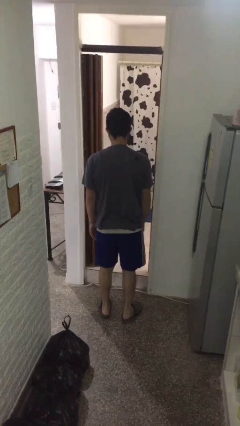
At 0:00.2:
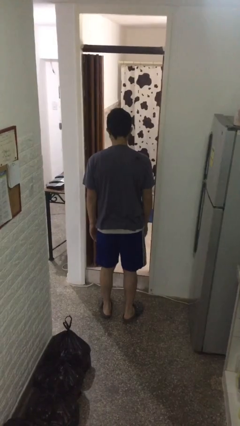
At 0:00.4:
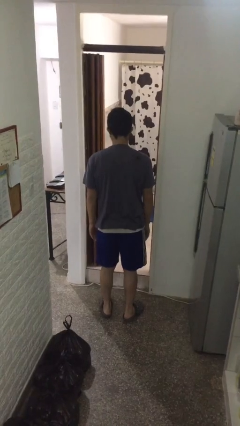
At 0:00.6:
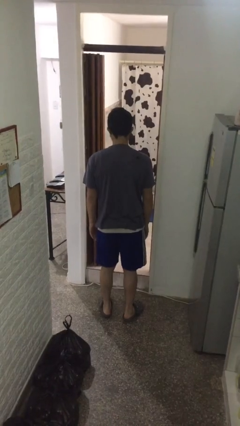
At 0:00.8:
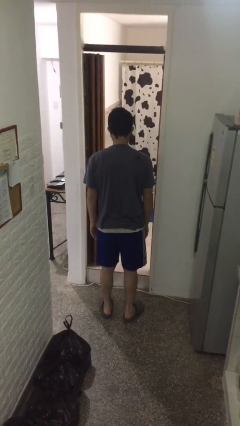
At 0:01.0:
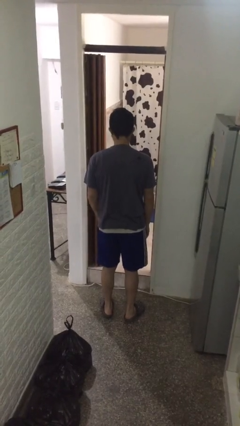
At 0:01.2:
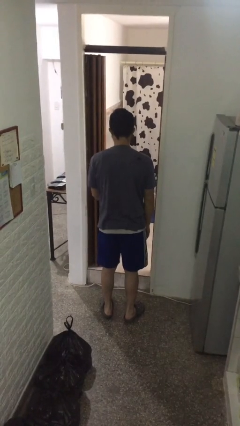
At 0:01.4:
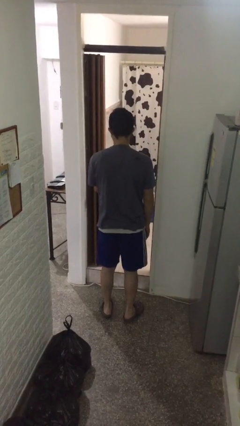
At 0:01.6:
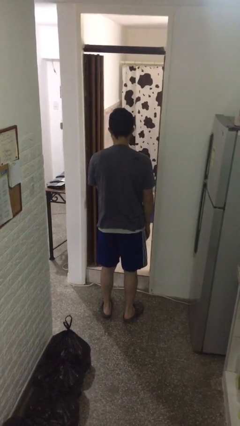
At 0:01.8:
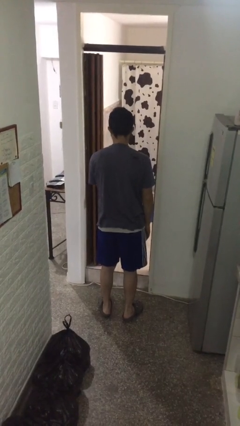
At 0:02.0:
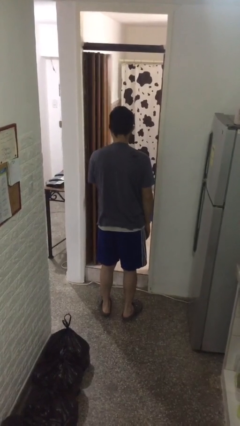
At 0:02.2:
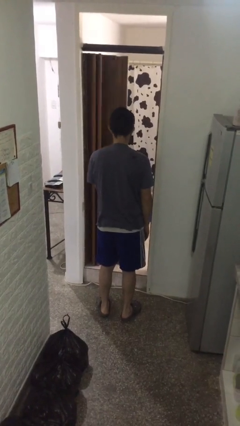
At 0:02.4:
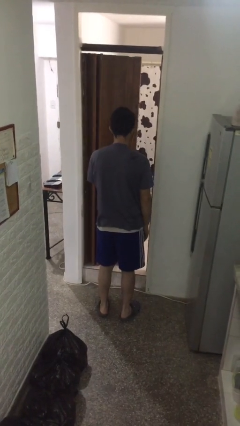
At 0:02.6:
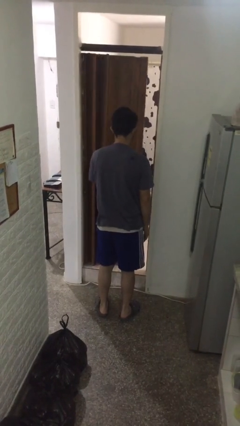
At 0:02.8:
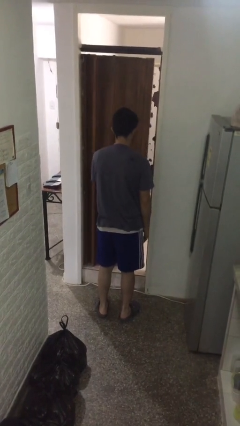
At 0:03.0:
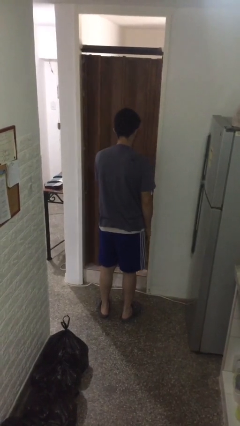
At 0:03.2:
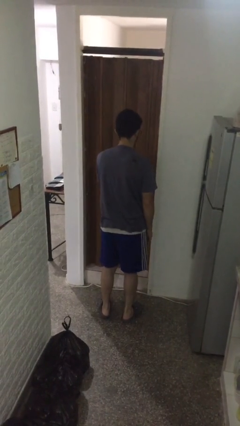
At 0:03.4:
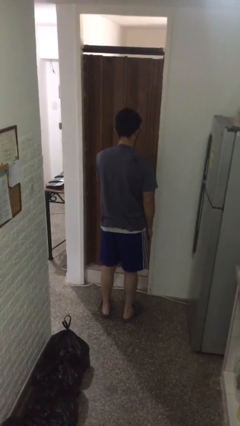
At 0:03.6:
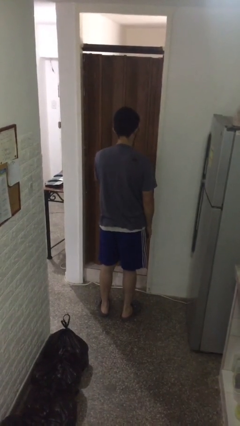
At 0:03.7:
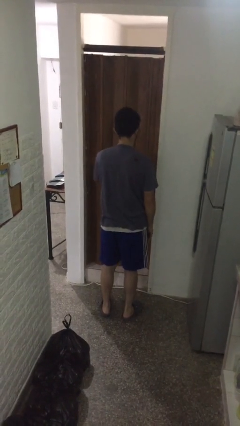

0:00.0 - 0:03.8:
person closes sliding door

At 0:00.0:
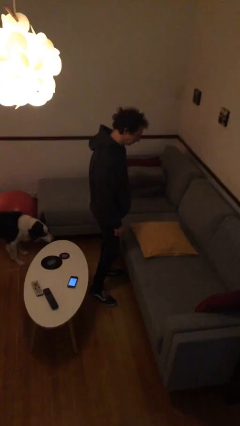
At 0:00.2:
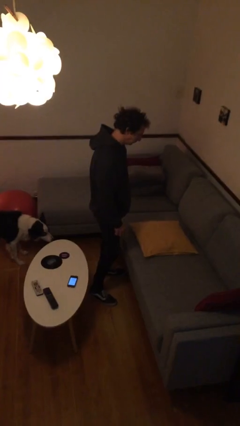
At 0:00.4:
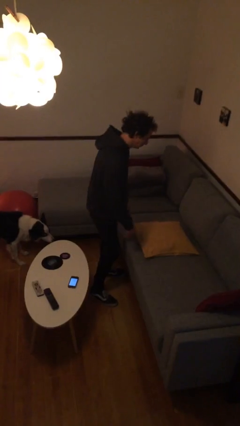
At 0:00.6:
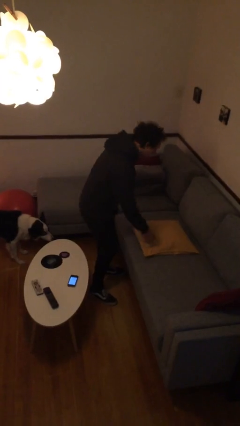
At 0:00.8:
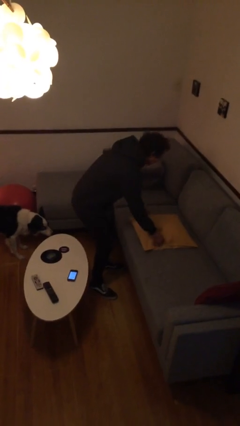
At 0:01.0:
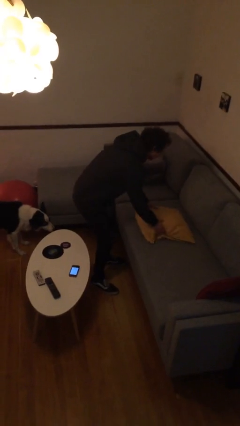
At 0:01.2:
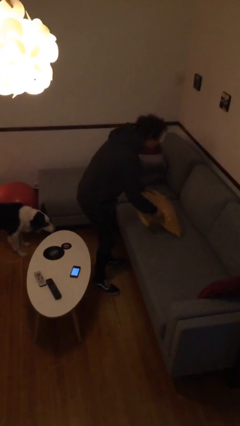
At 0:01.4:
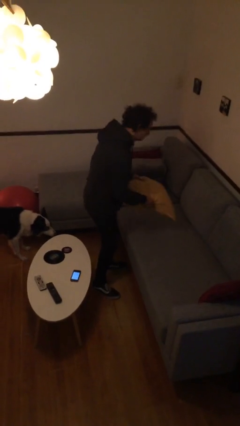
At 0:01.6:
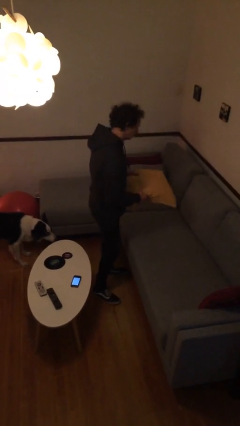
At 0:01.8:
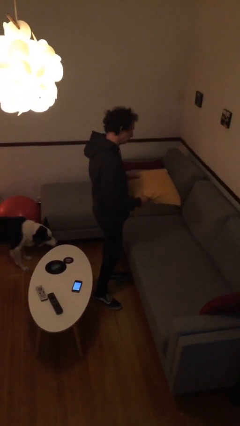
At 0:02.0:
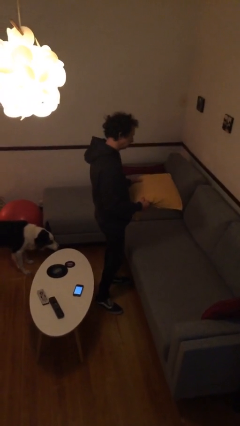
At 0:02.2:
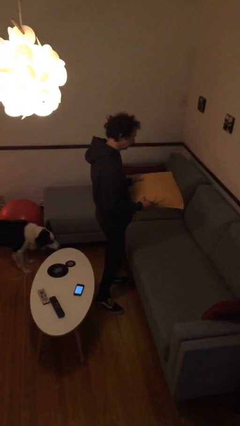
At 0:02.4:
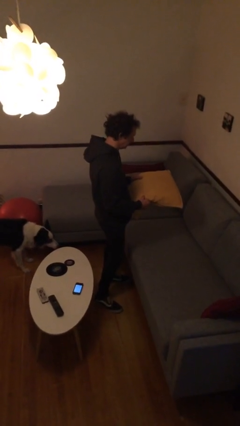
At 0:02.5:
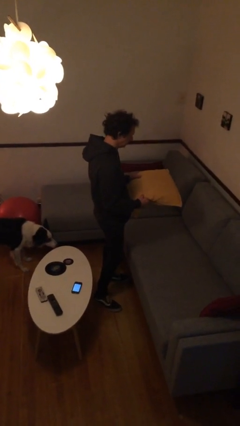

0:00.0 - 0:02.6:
person picks up object from couch

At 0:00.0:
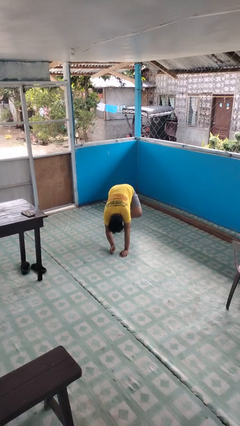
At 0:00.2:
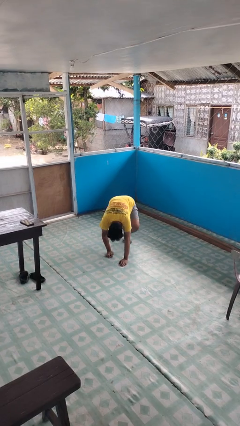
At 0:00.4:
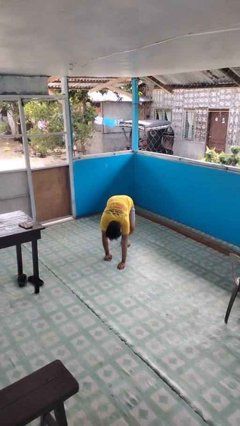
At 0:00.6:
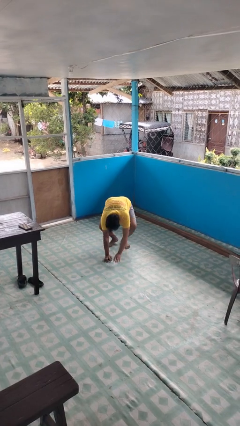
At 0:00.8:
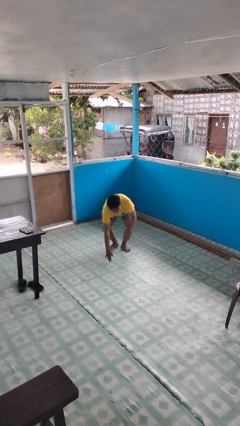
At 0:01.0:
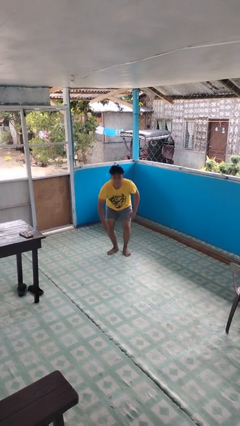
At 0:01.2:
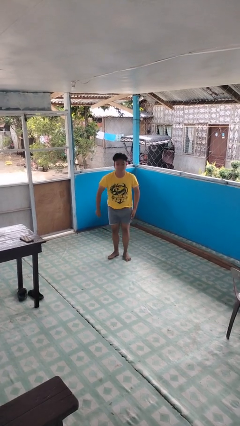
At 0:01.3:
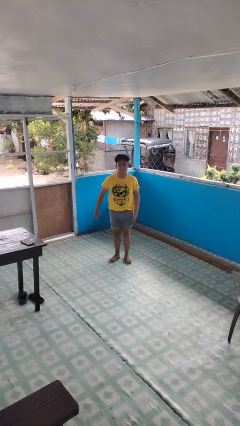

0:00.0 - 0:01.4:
person stands up from floor

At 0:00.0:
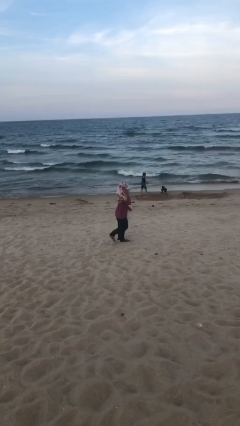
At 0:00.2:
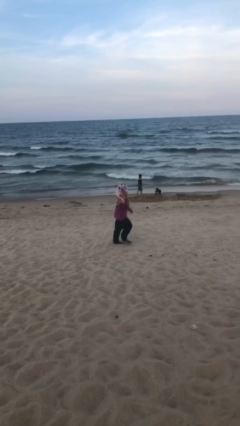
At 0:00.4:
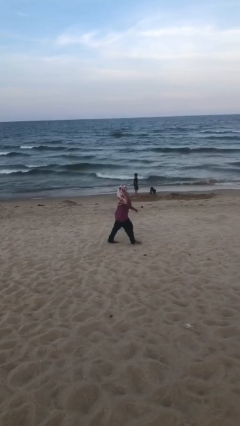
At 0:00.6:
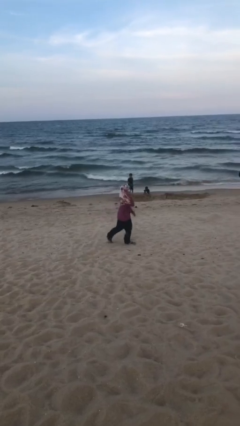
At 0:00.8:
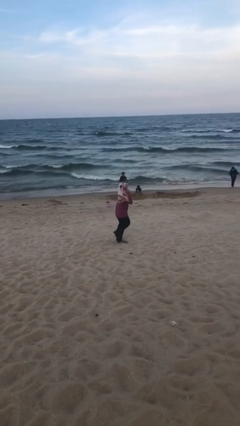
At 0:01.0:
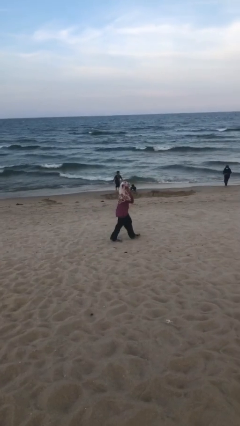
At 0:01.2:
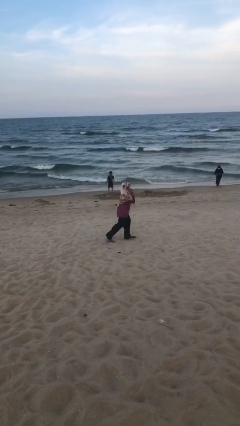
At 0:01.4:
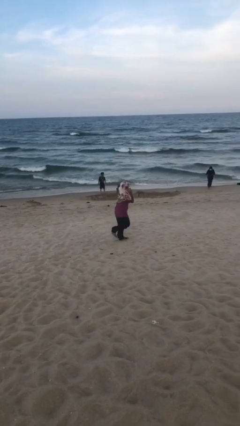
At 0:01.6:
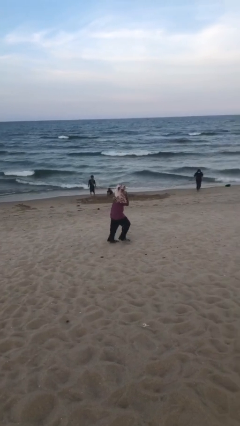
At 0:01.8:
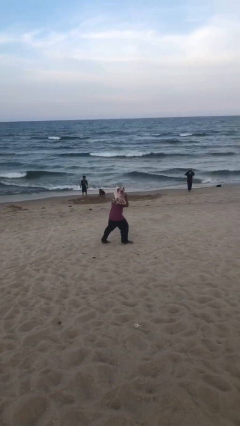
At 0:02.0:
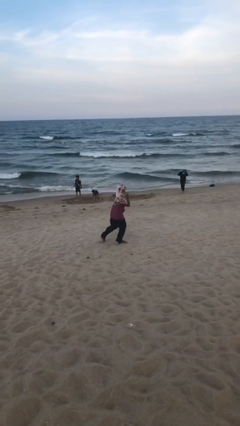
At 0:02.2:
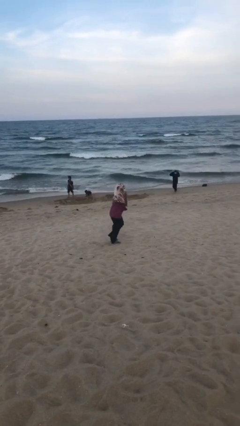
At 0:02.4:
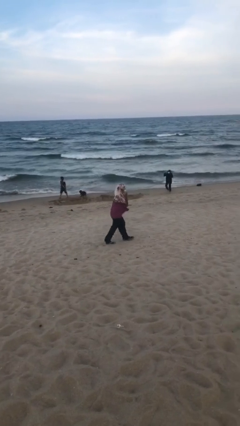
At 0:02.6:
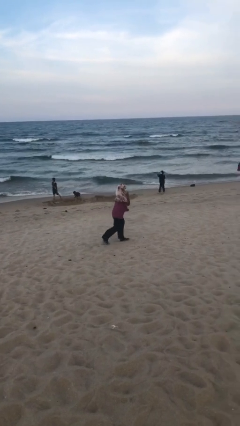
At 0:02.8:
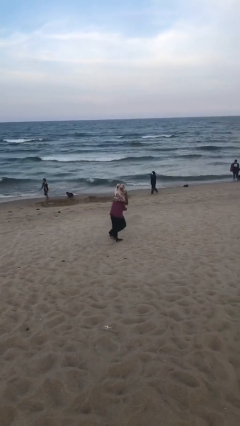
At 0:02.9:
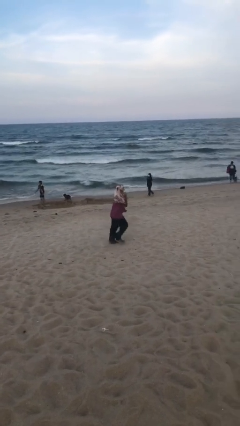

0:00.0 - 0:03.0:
person talks on phone

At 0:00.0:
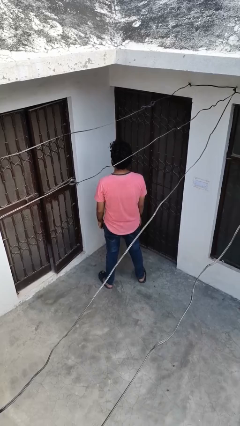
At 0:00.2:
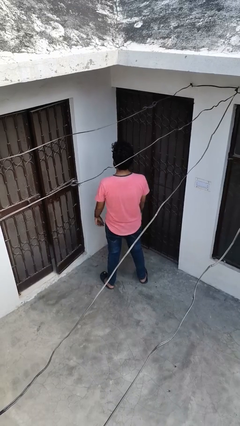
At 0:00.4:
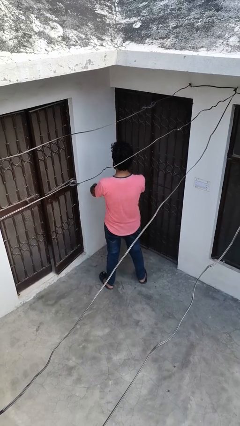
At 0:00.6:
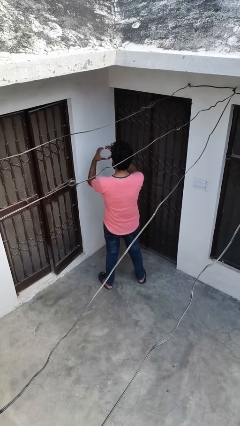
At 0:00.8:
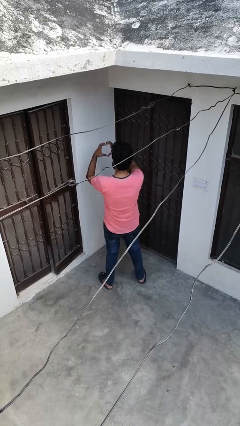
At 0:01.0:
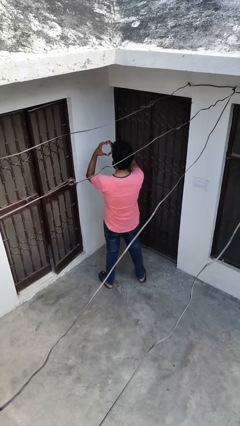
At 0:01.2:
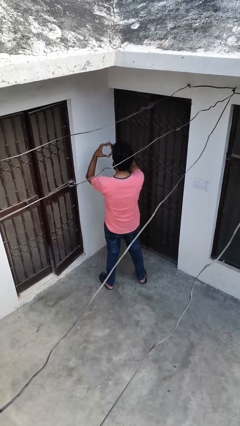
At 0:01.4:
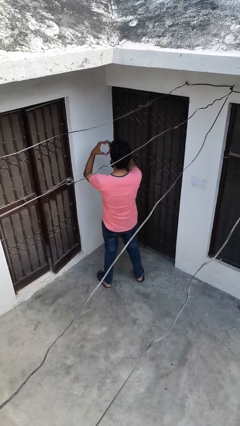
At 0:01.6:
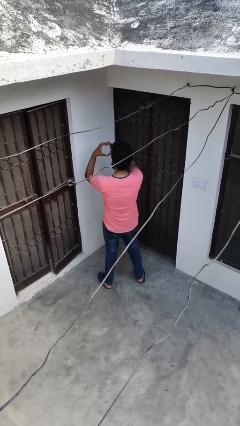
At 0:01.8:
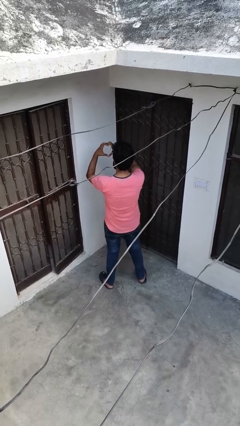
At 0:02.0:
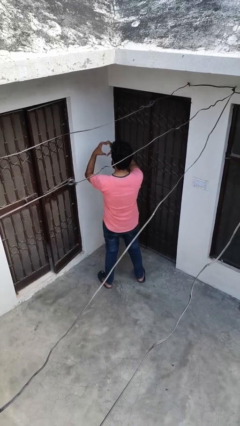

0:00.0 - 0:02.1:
person gestures heart

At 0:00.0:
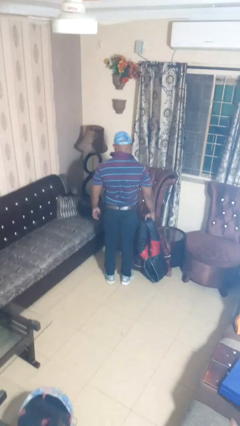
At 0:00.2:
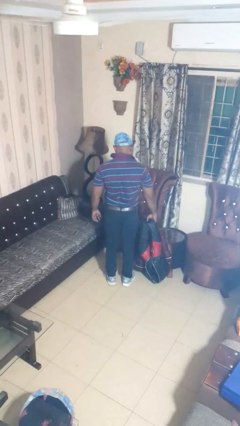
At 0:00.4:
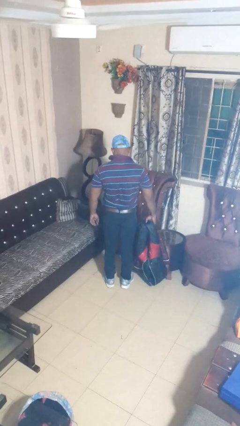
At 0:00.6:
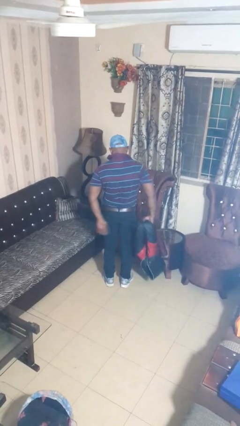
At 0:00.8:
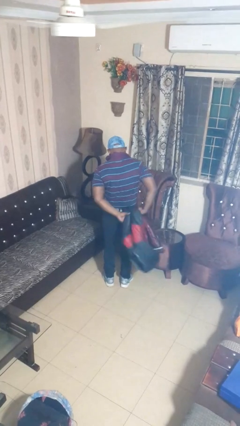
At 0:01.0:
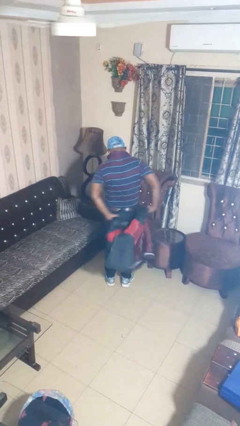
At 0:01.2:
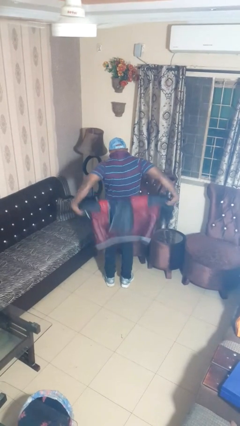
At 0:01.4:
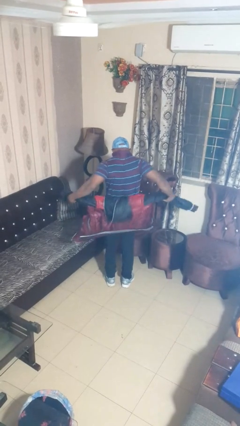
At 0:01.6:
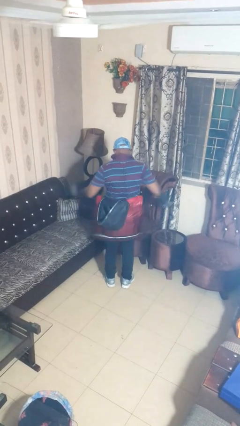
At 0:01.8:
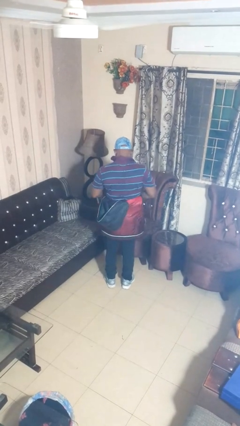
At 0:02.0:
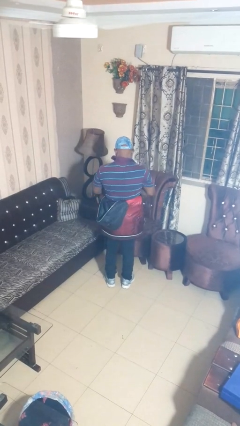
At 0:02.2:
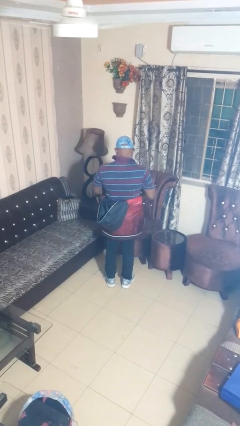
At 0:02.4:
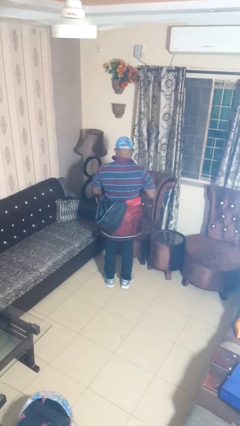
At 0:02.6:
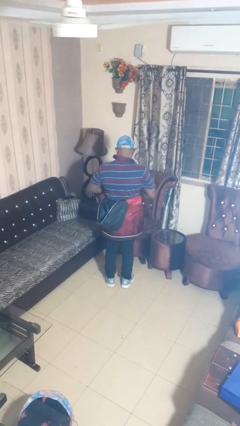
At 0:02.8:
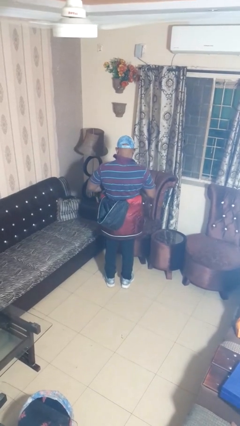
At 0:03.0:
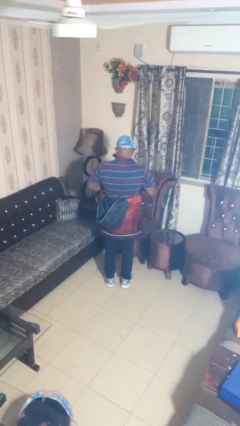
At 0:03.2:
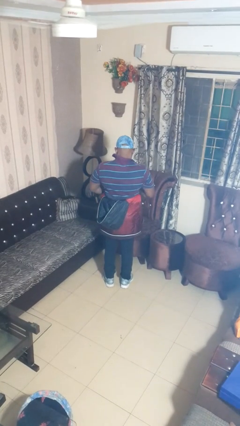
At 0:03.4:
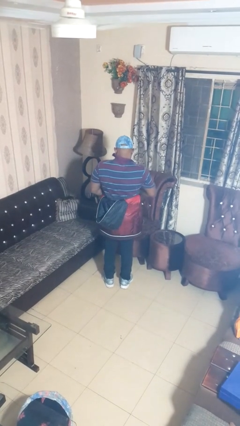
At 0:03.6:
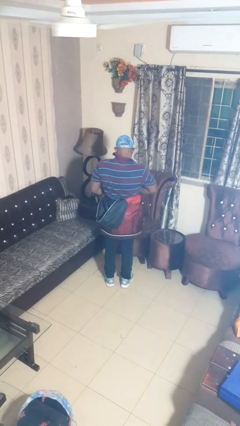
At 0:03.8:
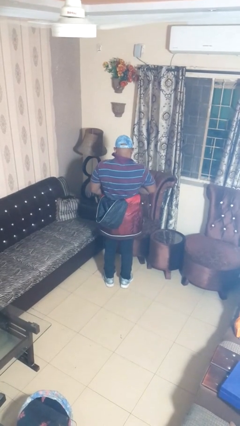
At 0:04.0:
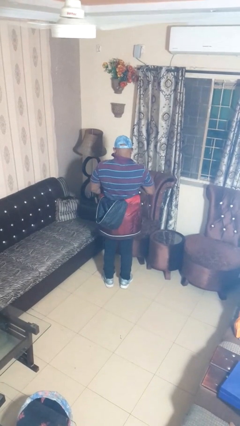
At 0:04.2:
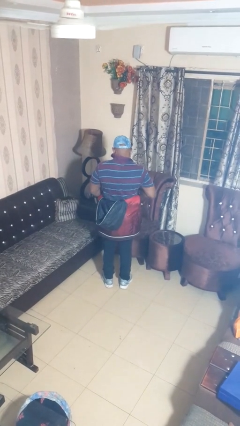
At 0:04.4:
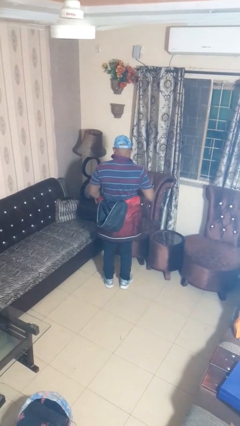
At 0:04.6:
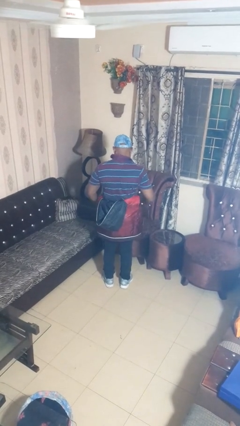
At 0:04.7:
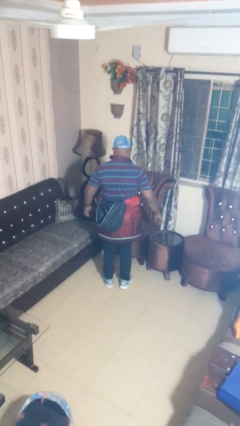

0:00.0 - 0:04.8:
person ties jacket around waist
